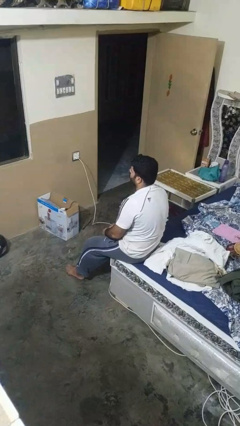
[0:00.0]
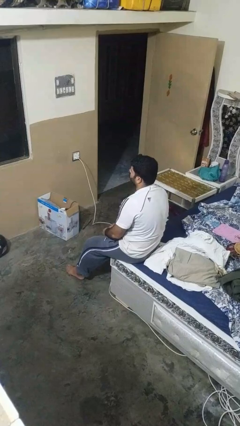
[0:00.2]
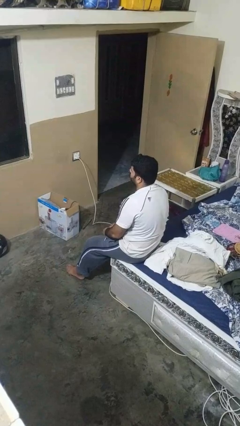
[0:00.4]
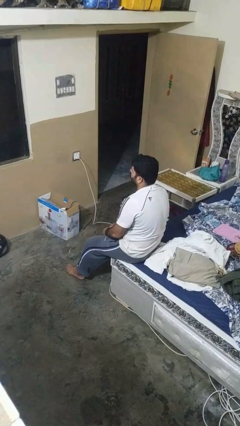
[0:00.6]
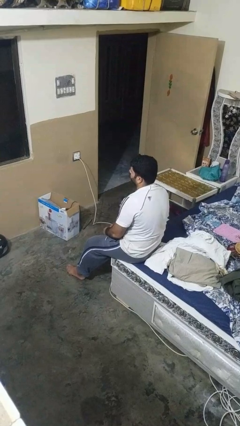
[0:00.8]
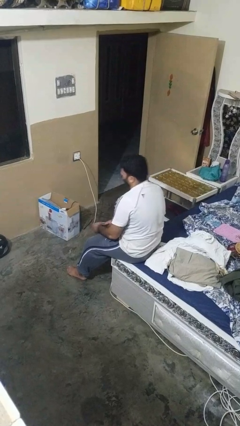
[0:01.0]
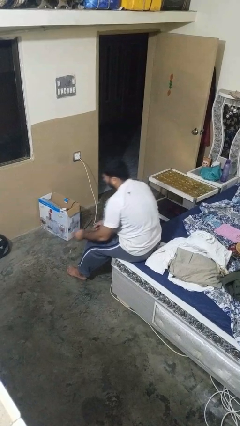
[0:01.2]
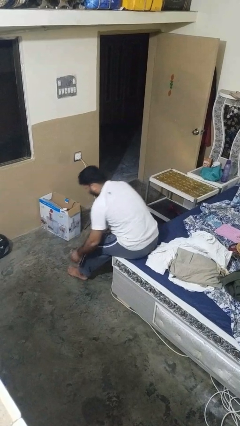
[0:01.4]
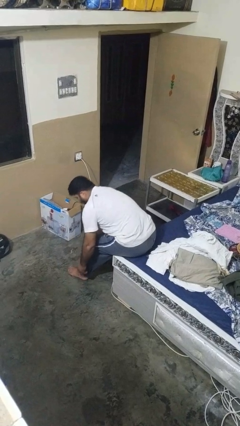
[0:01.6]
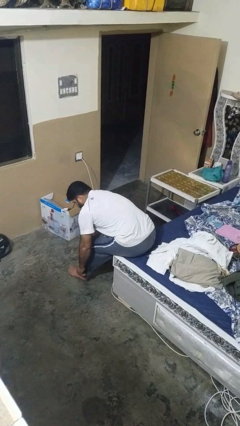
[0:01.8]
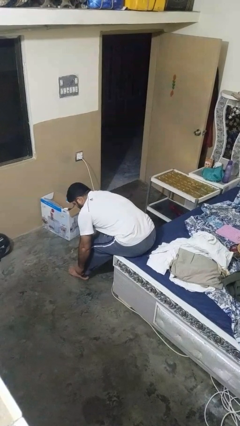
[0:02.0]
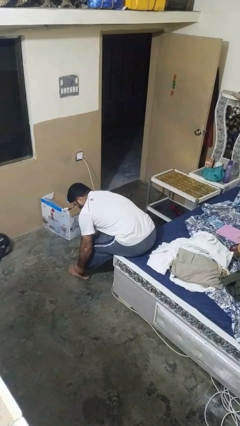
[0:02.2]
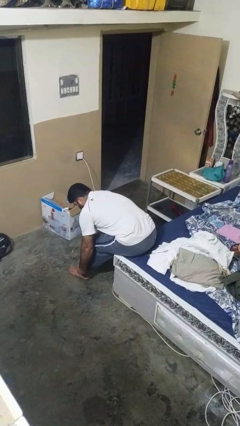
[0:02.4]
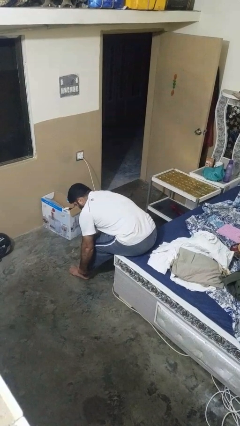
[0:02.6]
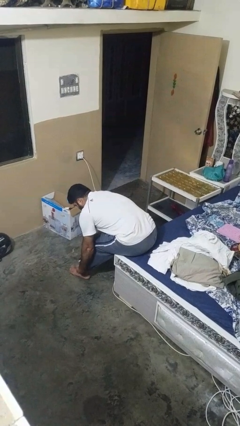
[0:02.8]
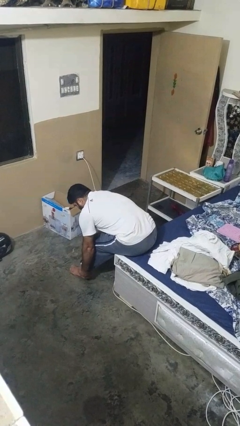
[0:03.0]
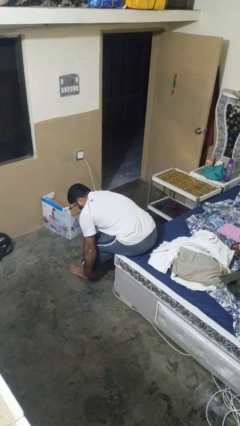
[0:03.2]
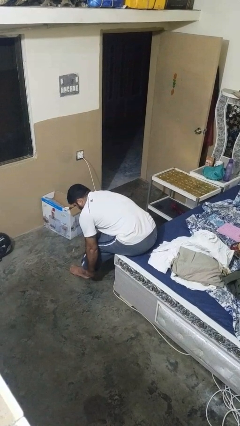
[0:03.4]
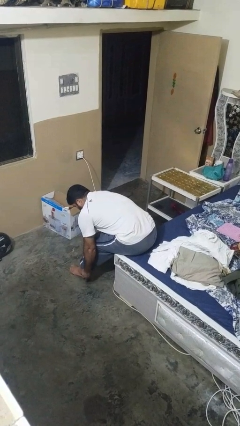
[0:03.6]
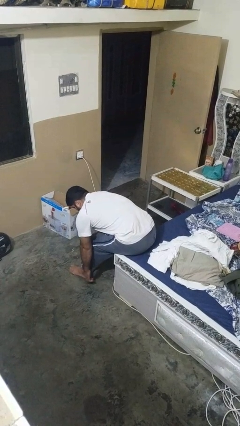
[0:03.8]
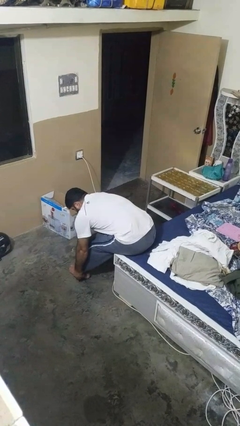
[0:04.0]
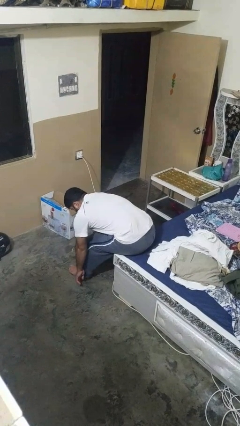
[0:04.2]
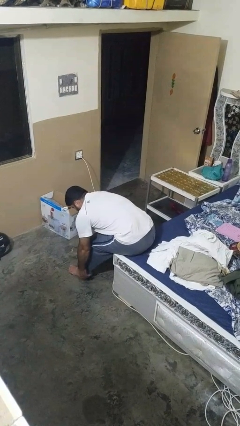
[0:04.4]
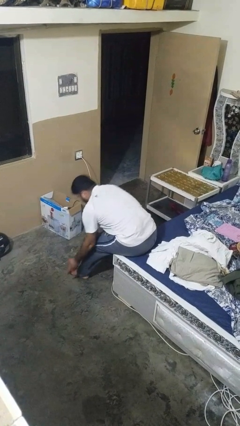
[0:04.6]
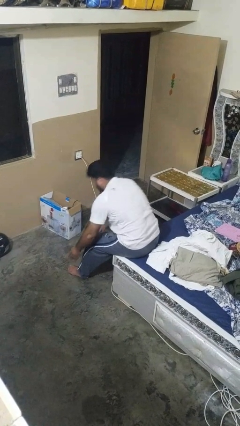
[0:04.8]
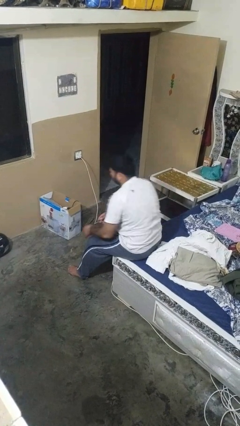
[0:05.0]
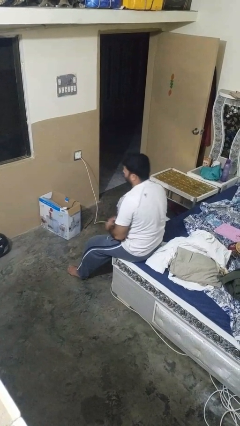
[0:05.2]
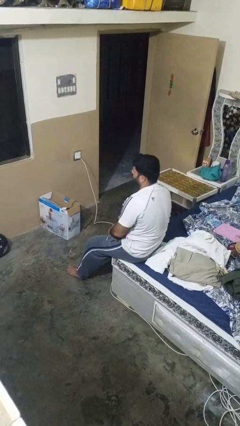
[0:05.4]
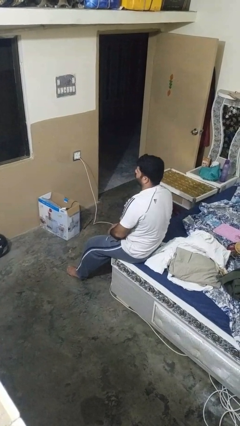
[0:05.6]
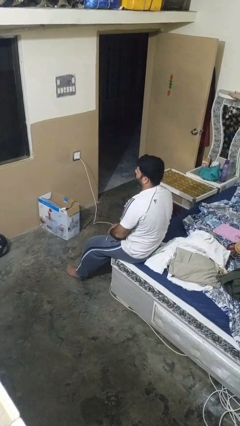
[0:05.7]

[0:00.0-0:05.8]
person hikes up pants

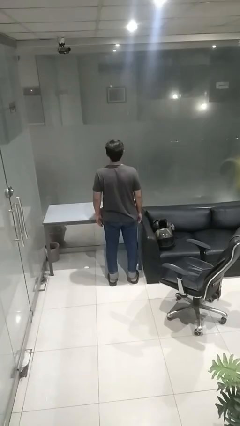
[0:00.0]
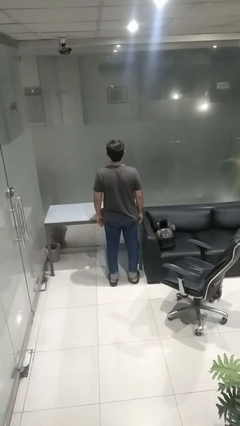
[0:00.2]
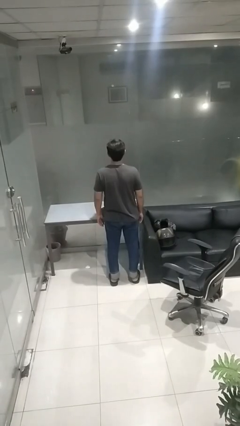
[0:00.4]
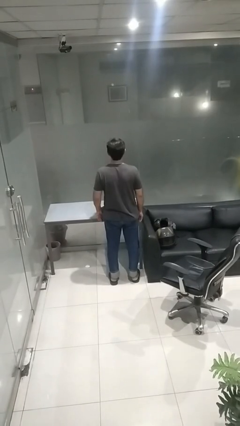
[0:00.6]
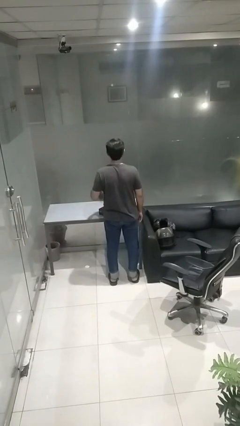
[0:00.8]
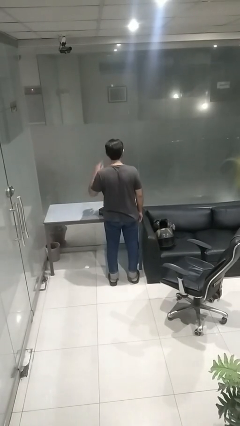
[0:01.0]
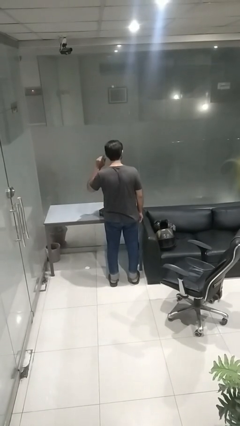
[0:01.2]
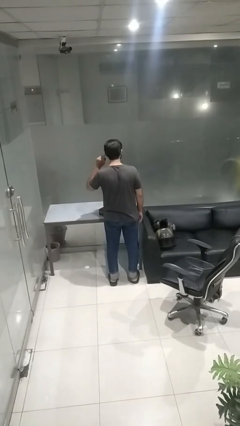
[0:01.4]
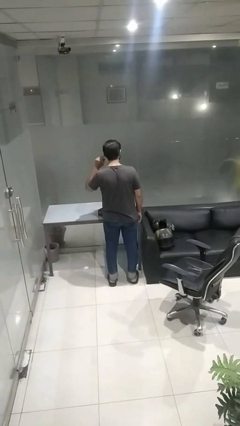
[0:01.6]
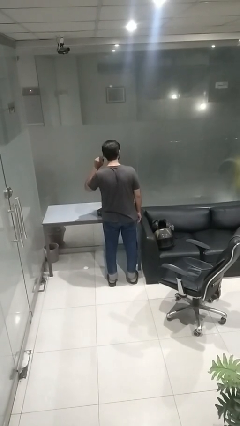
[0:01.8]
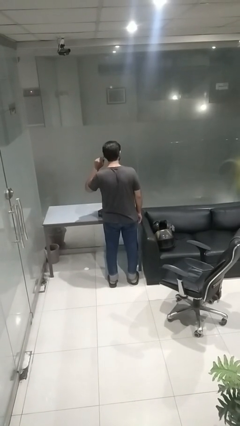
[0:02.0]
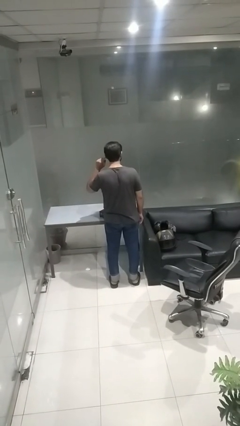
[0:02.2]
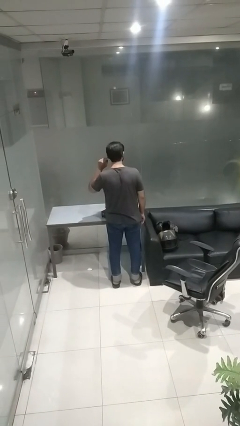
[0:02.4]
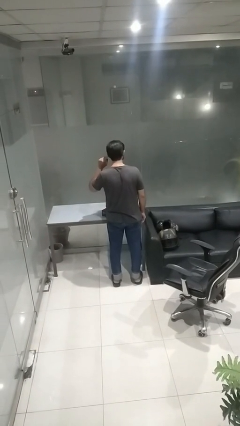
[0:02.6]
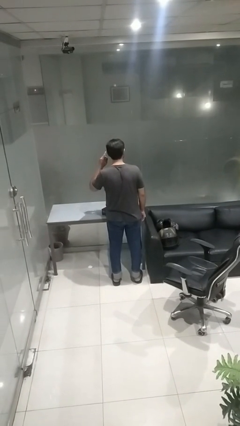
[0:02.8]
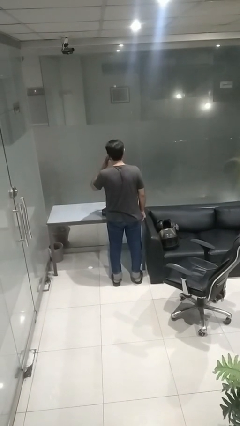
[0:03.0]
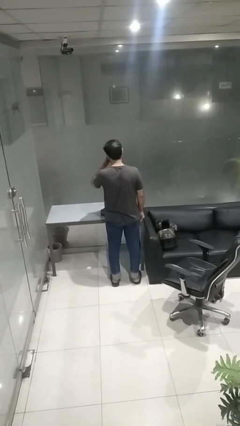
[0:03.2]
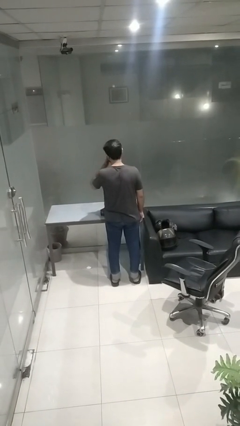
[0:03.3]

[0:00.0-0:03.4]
person gestures listen closely

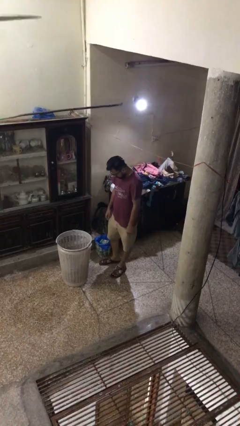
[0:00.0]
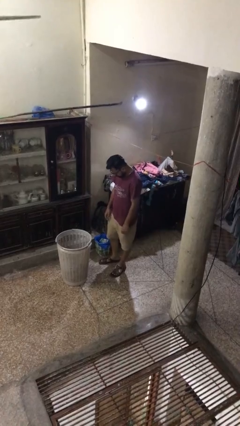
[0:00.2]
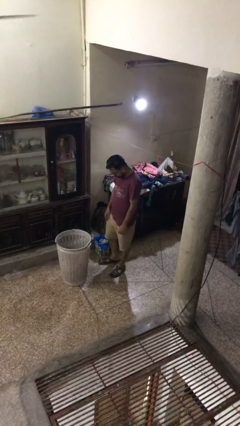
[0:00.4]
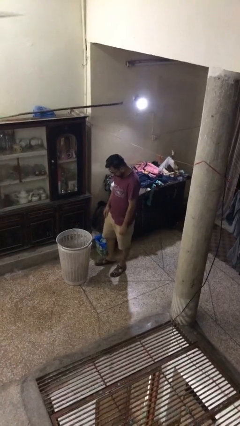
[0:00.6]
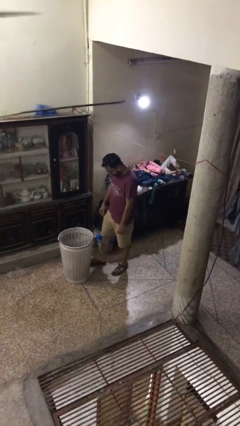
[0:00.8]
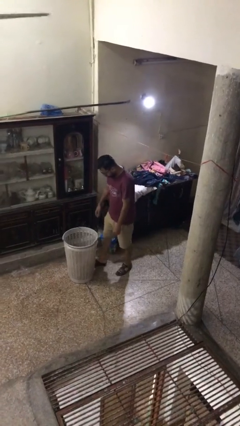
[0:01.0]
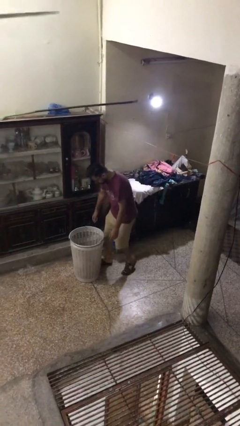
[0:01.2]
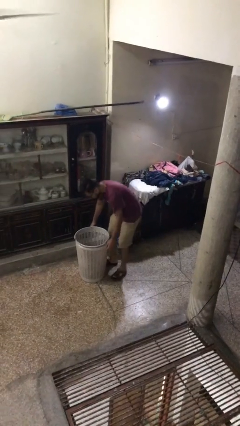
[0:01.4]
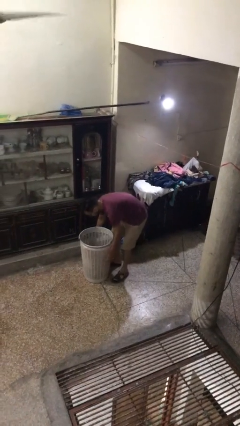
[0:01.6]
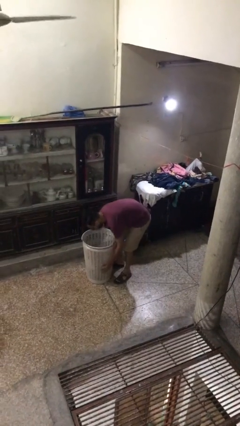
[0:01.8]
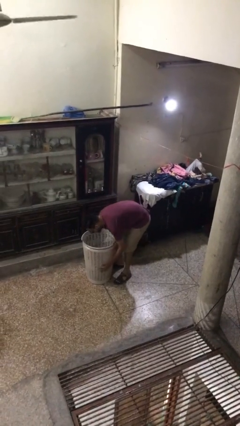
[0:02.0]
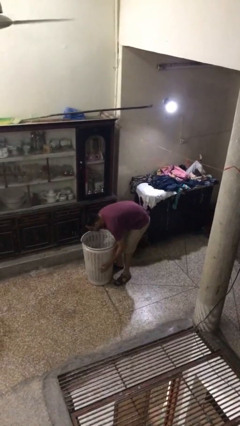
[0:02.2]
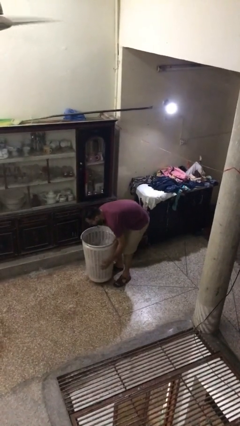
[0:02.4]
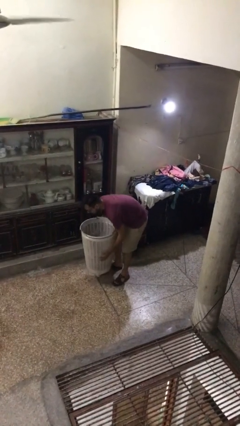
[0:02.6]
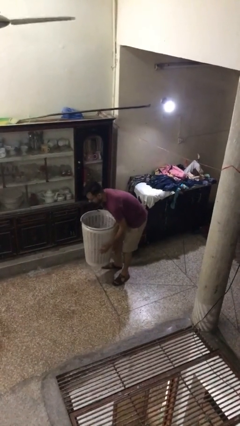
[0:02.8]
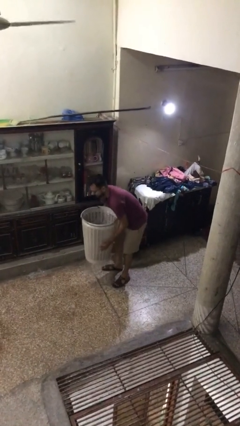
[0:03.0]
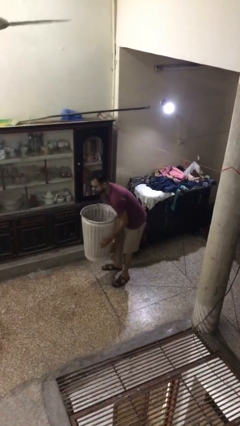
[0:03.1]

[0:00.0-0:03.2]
person picks up object from floor

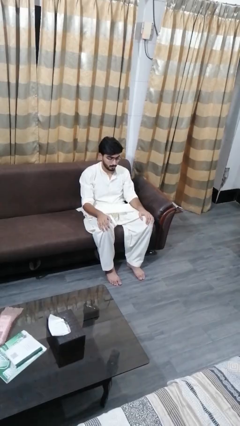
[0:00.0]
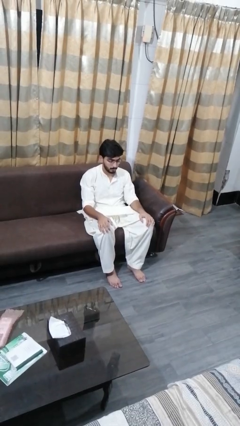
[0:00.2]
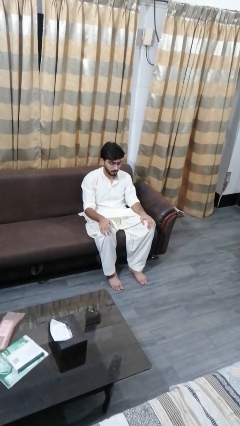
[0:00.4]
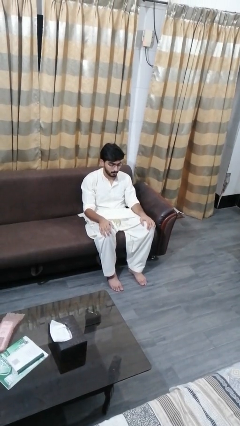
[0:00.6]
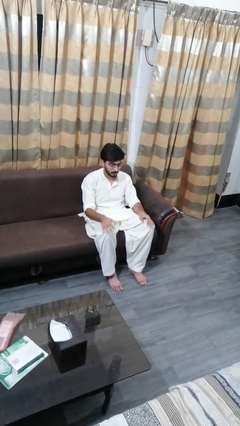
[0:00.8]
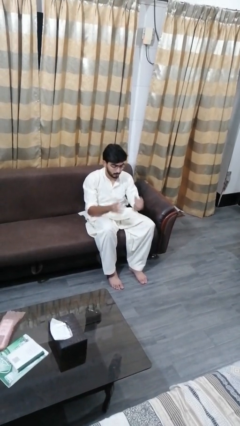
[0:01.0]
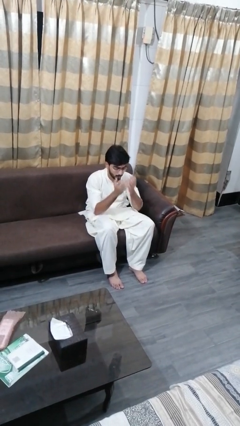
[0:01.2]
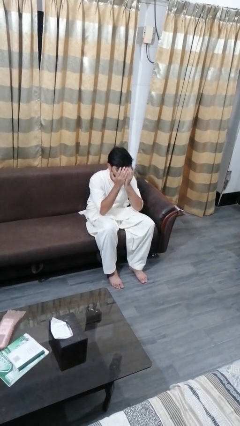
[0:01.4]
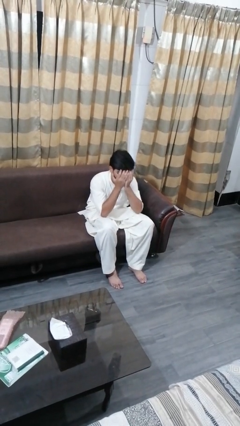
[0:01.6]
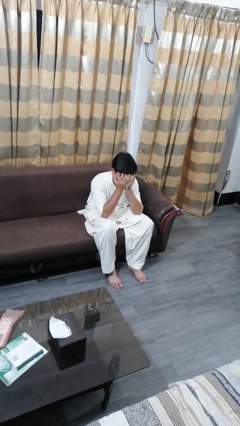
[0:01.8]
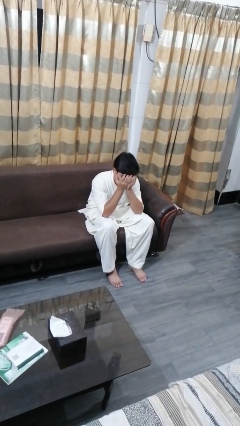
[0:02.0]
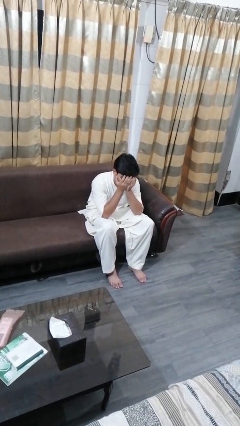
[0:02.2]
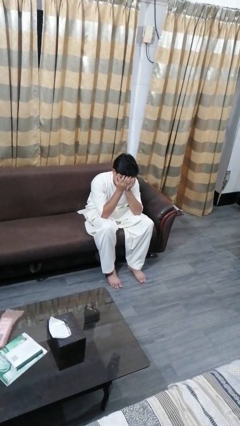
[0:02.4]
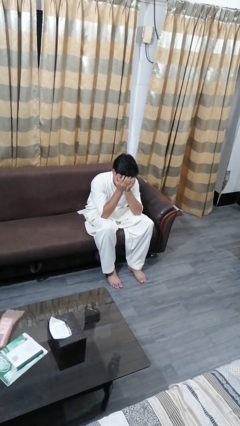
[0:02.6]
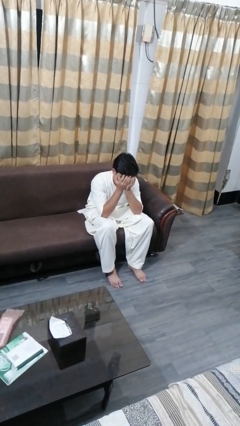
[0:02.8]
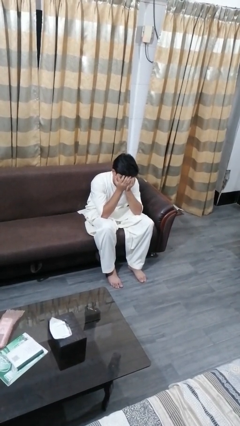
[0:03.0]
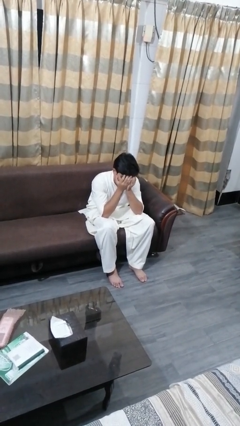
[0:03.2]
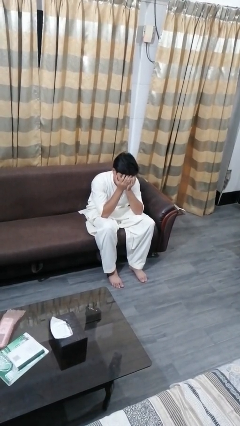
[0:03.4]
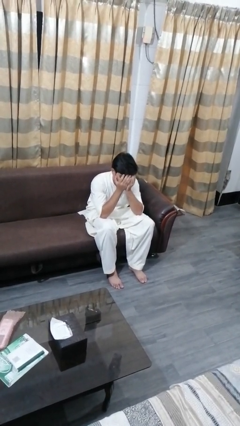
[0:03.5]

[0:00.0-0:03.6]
person covers face with hands

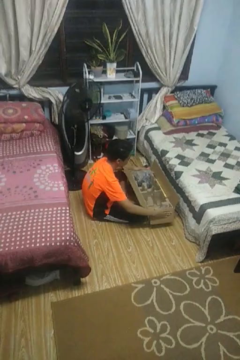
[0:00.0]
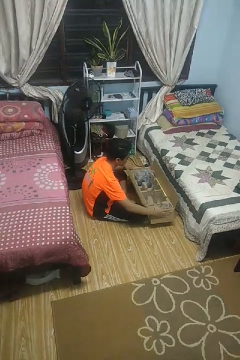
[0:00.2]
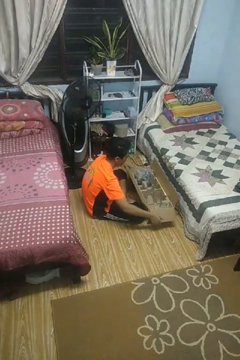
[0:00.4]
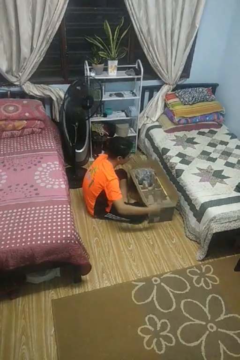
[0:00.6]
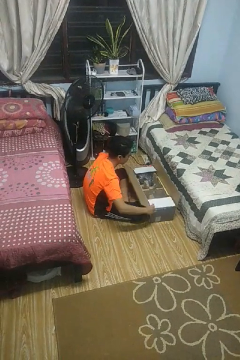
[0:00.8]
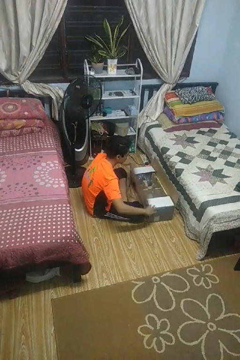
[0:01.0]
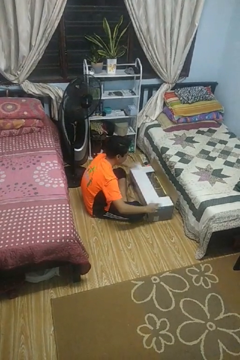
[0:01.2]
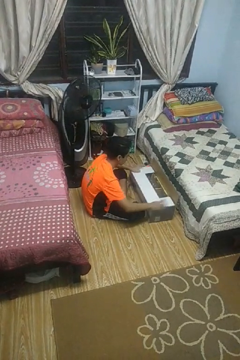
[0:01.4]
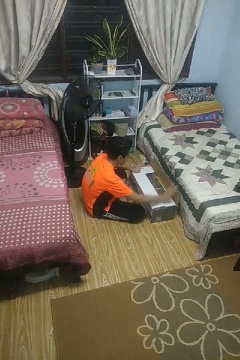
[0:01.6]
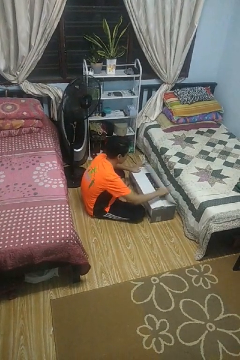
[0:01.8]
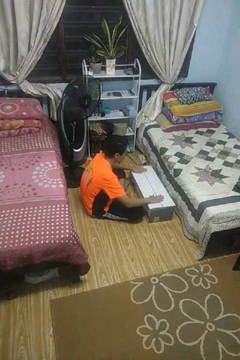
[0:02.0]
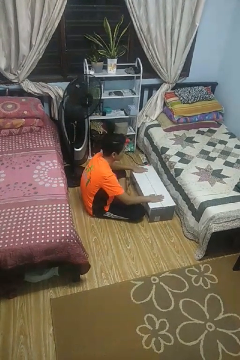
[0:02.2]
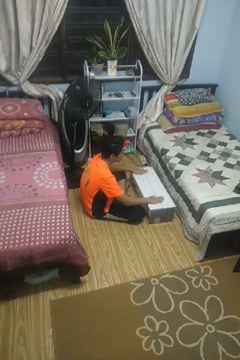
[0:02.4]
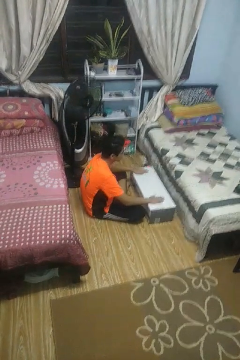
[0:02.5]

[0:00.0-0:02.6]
person closes box
